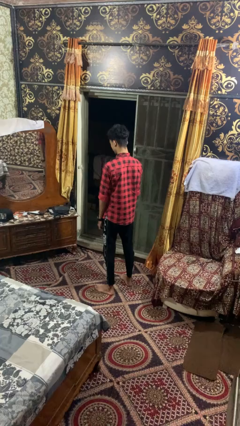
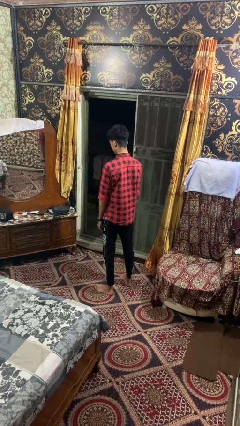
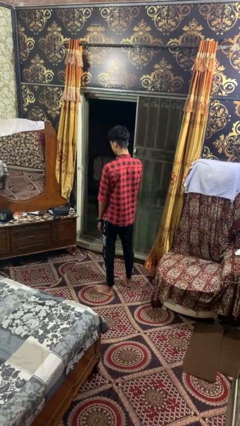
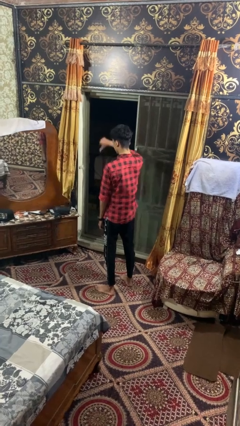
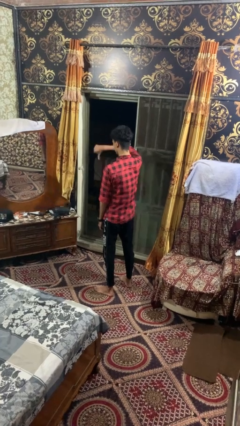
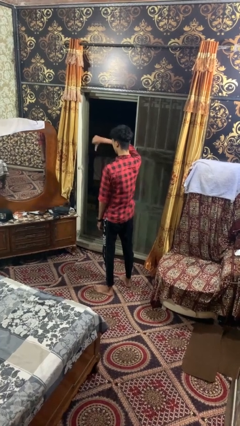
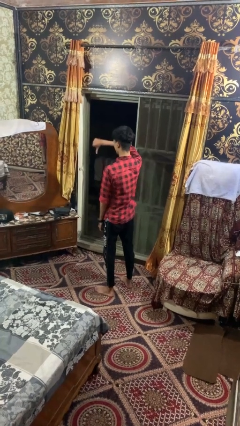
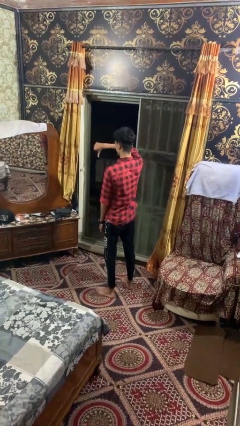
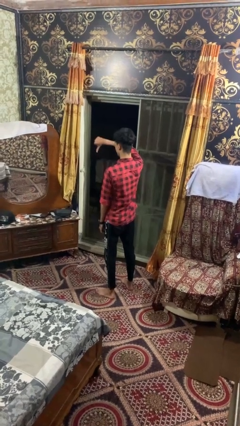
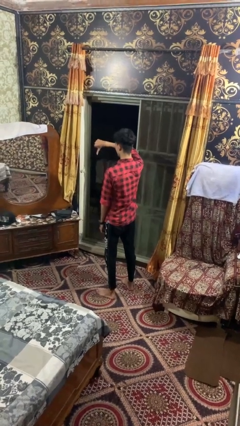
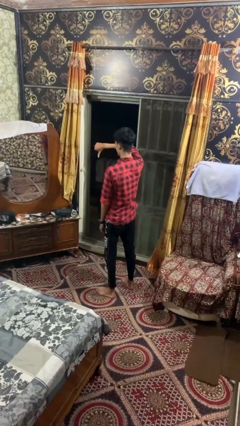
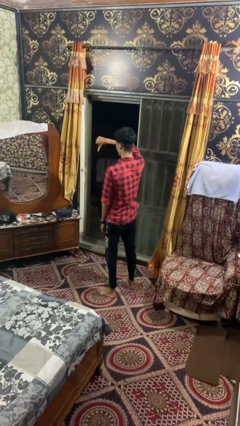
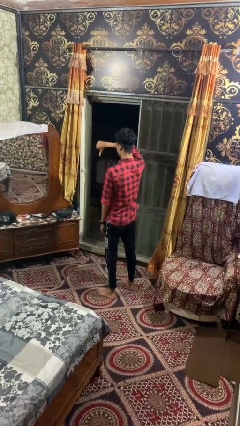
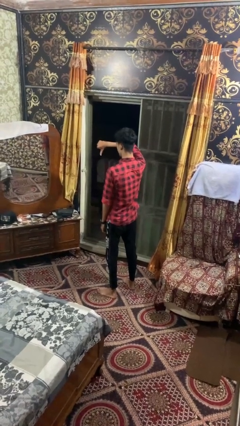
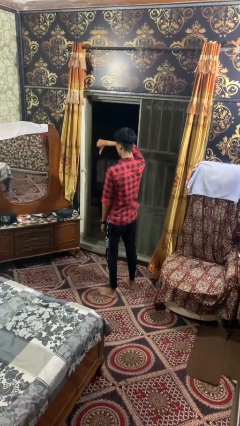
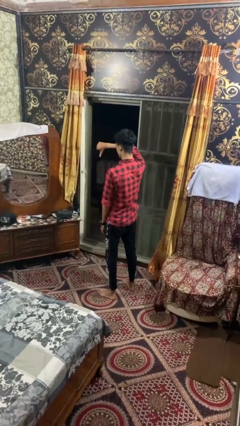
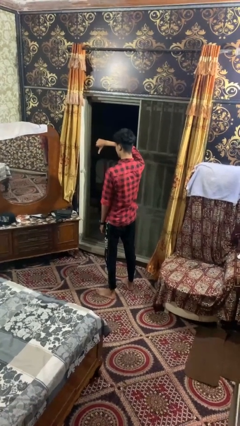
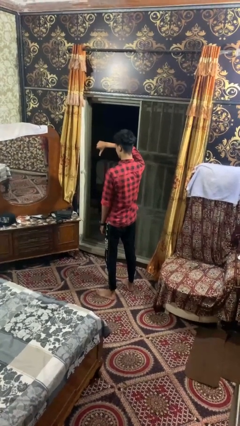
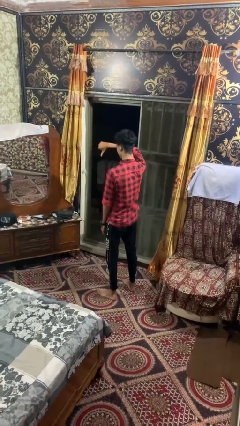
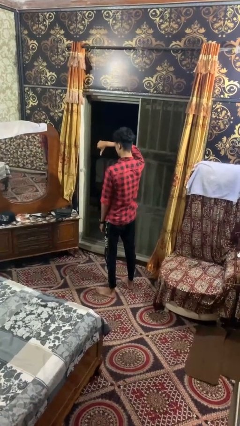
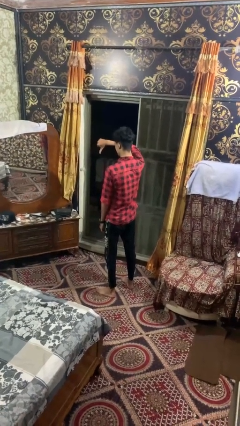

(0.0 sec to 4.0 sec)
person gestures thumbs down

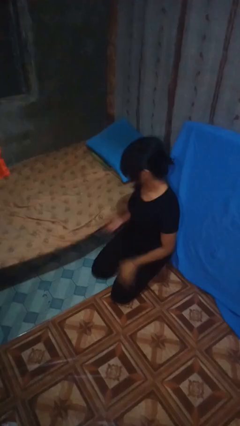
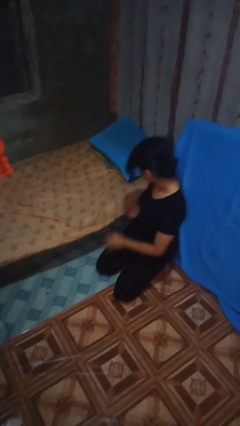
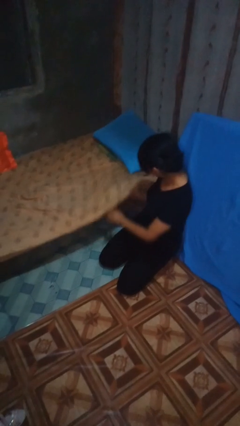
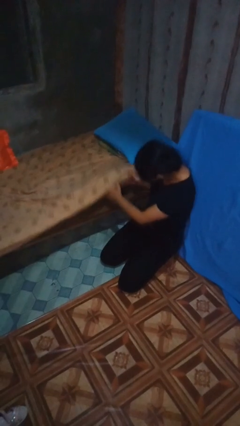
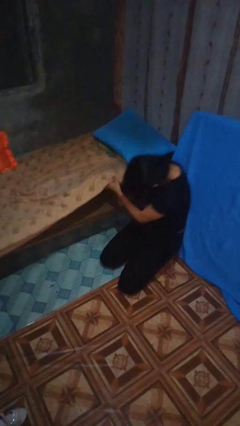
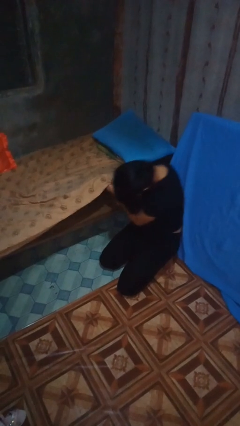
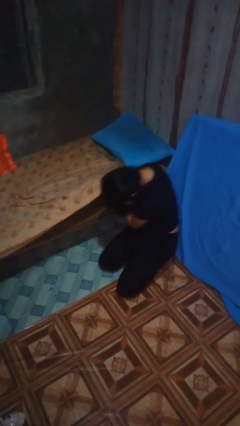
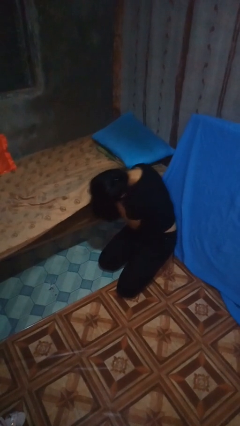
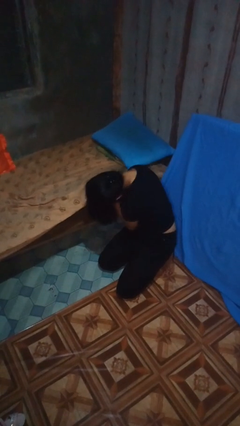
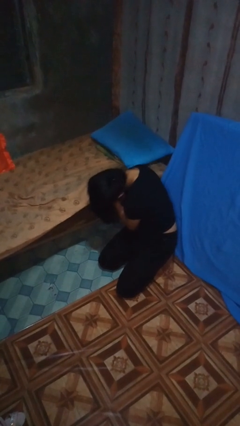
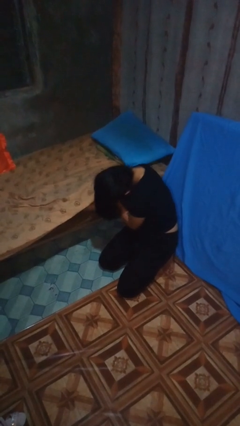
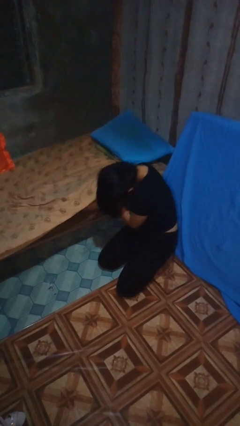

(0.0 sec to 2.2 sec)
person searches under bed

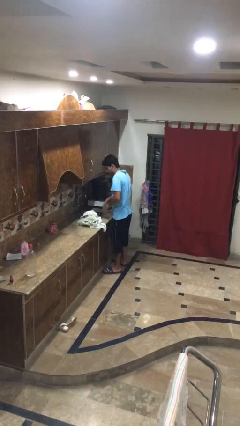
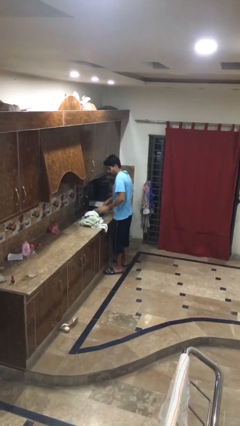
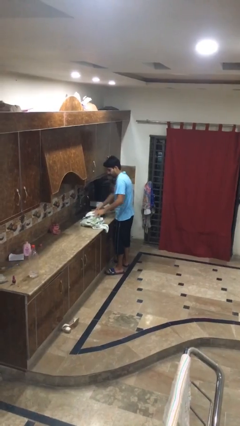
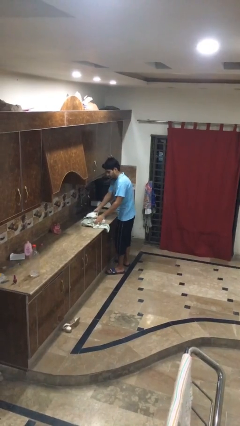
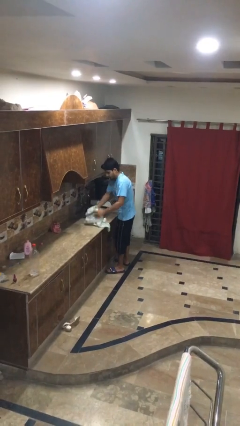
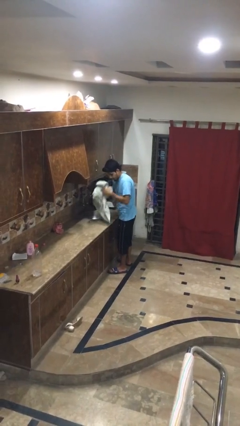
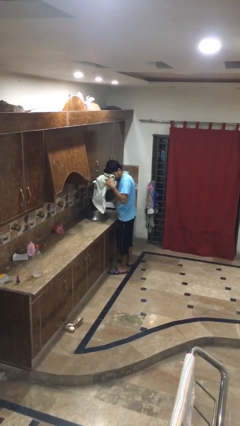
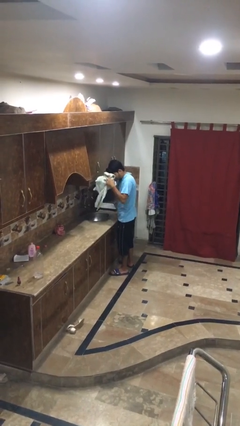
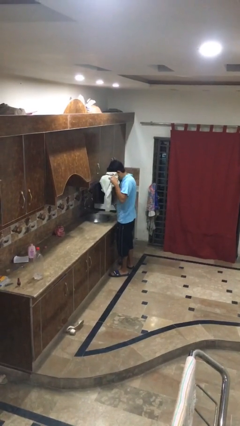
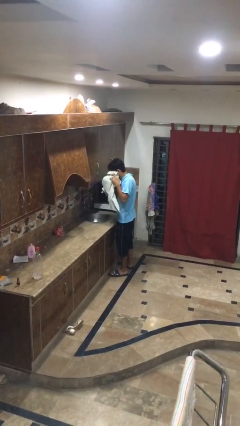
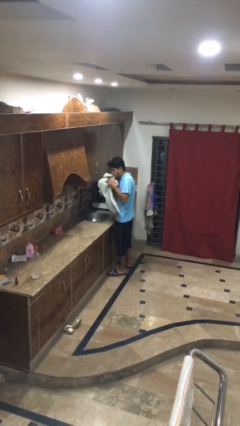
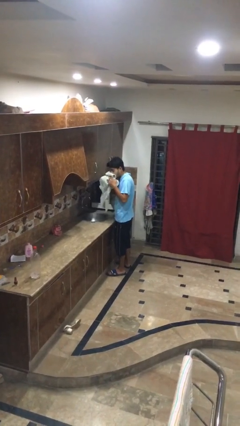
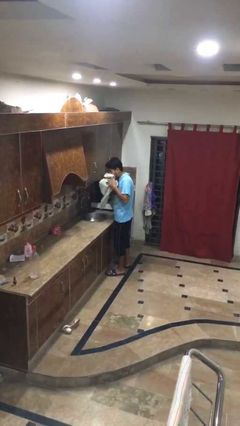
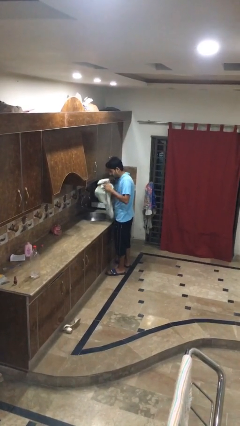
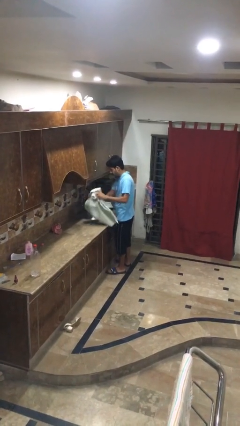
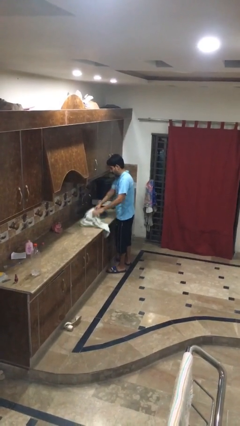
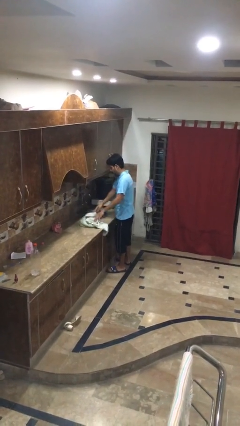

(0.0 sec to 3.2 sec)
person dries face with towel

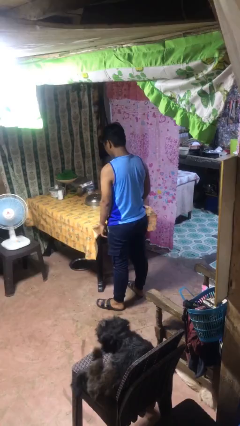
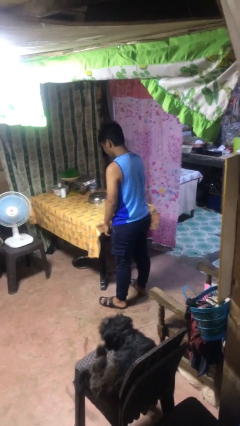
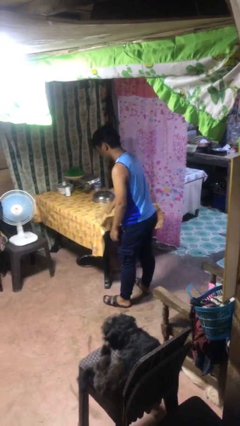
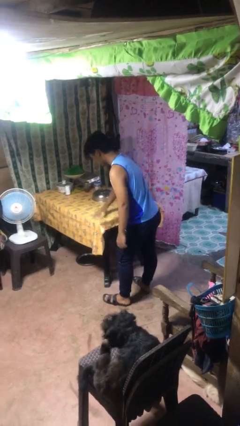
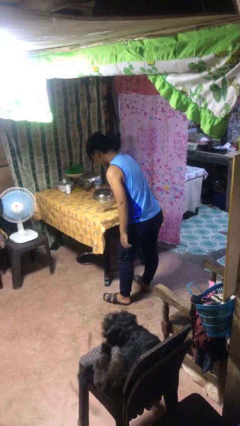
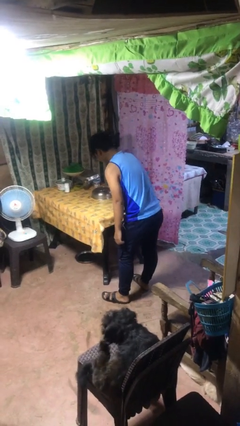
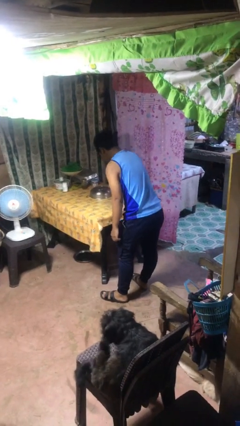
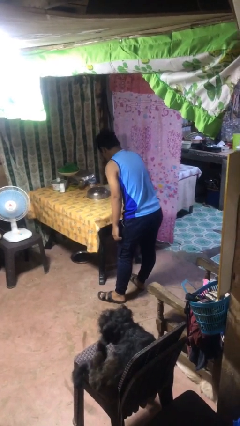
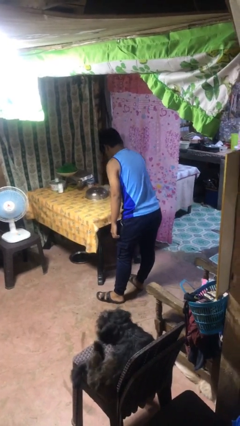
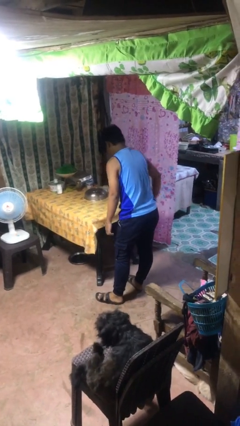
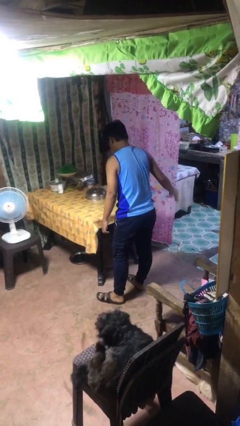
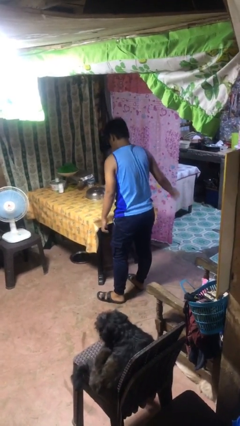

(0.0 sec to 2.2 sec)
person cleans table with rag

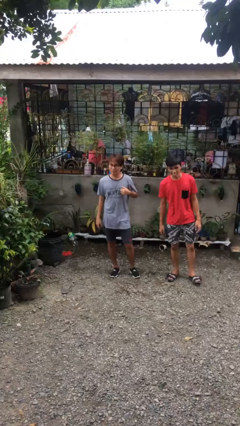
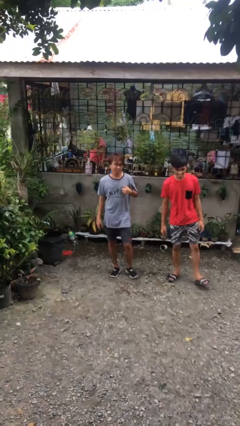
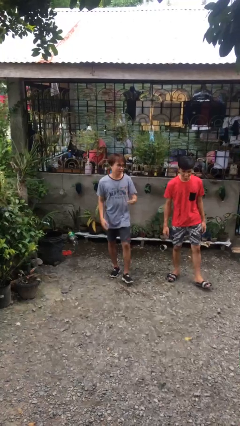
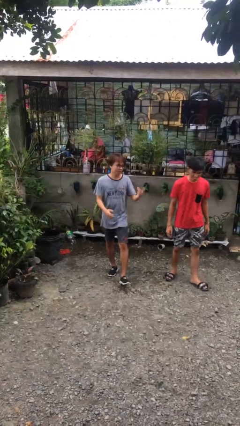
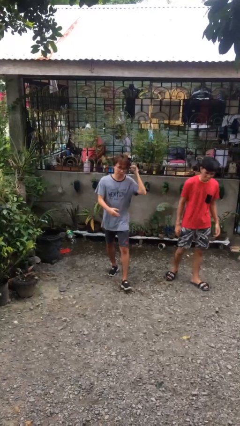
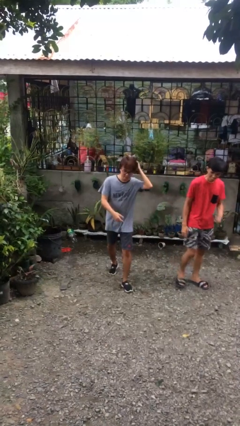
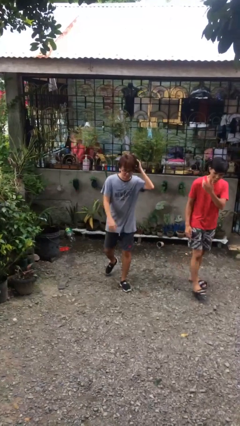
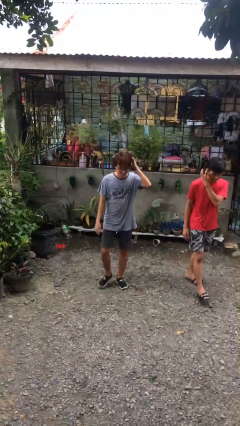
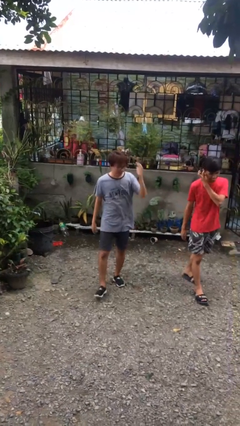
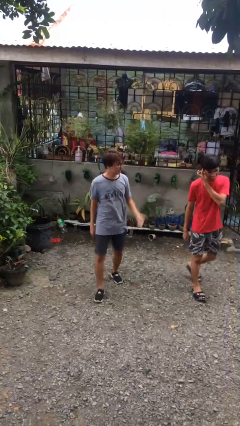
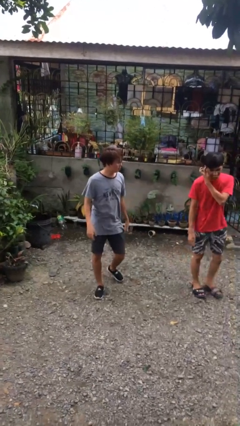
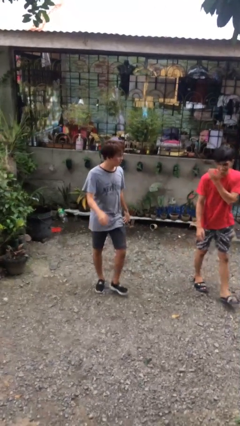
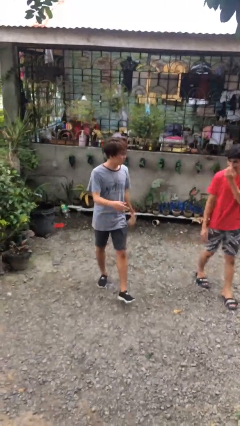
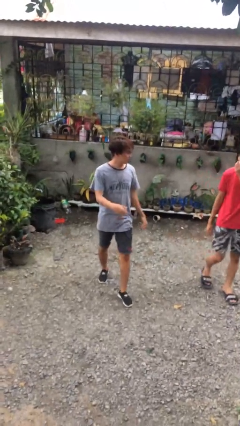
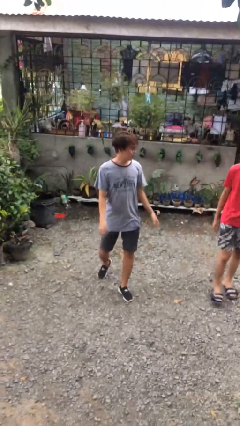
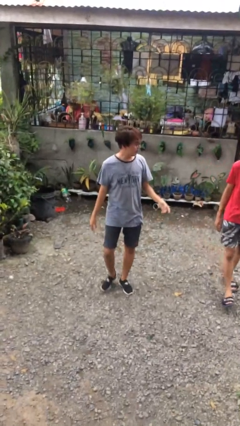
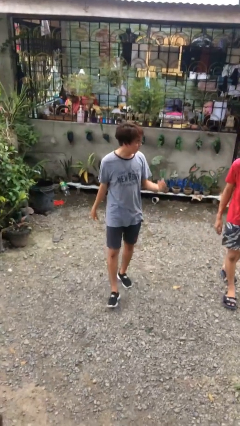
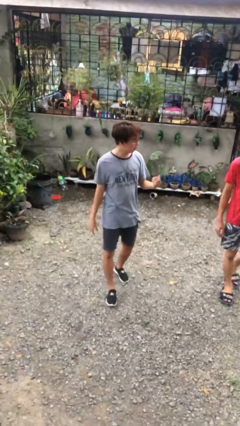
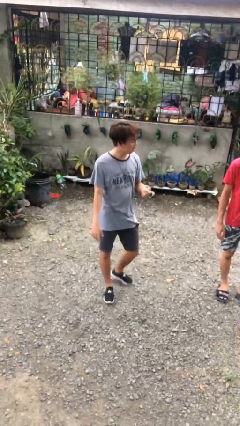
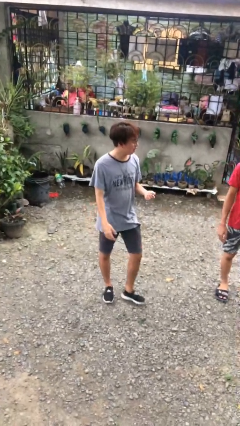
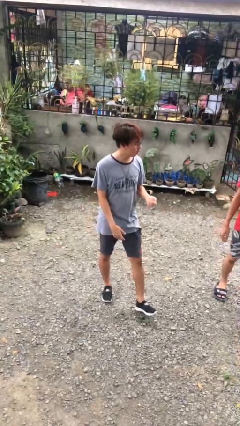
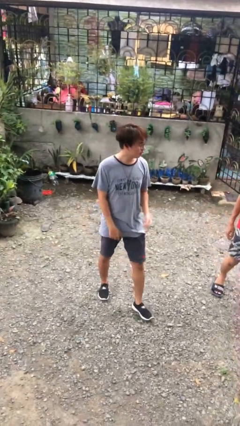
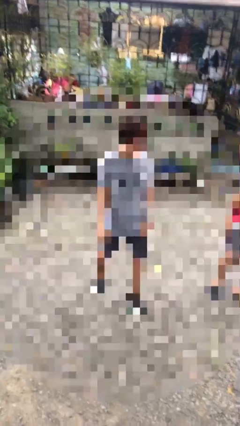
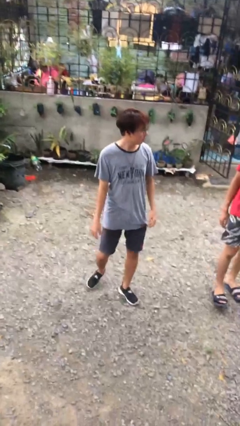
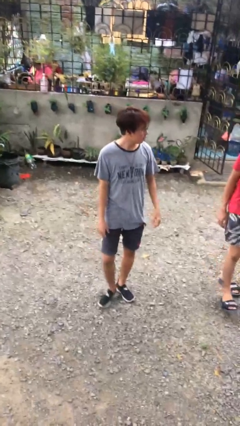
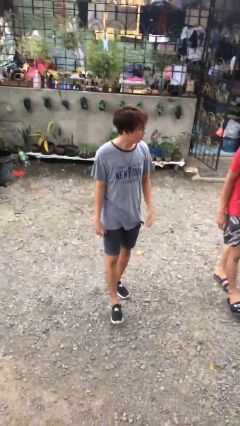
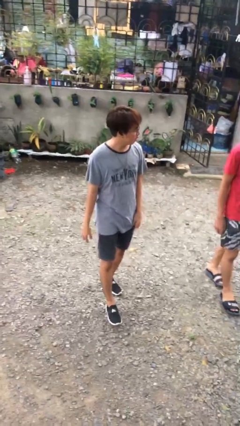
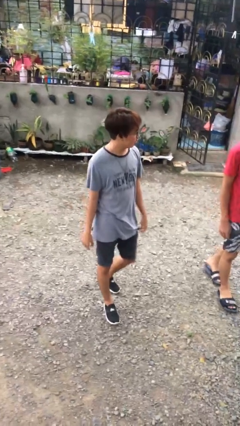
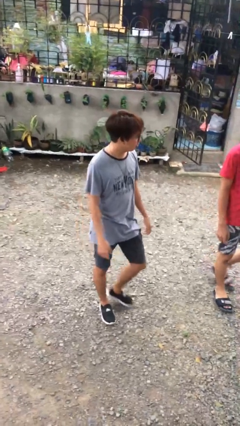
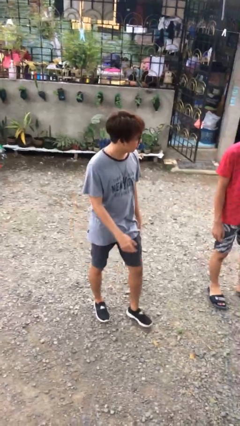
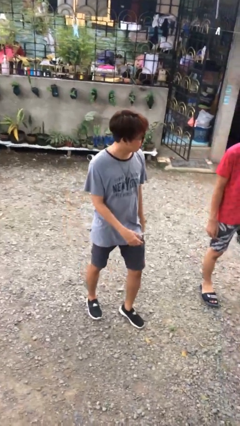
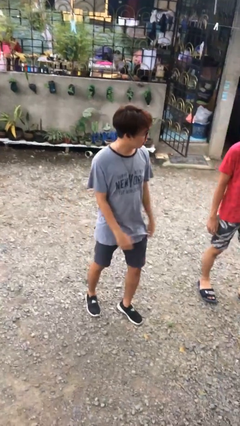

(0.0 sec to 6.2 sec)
person talks to person
